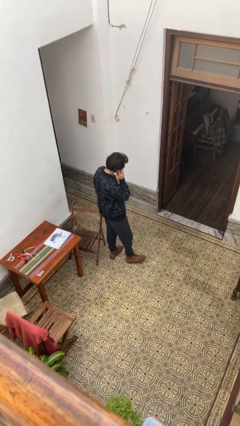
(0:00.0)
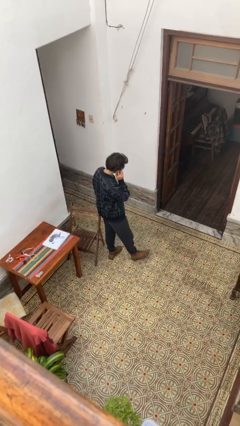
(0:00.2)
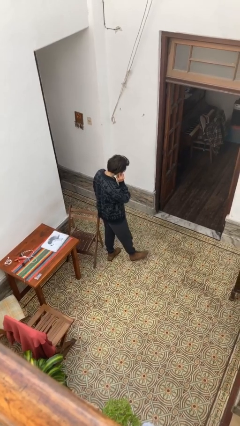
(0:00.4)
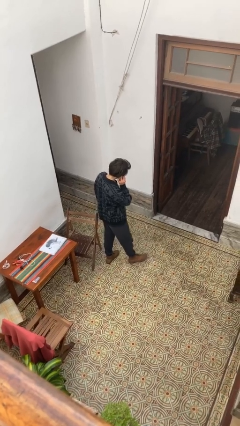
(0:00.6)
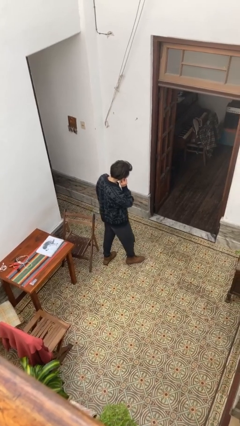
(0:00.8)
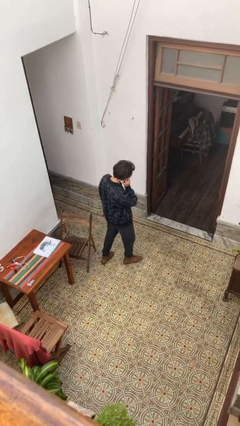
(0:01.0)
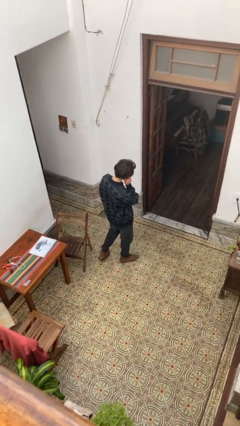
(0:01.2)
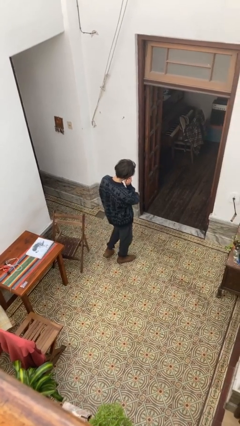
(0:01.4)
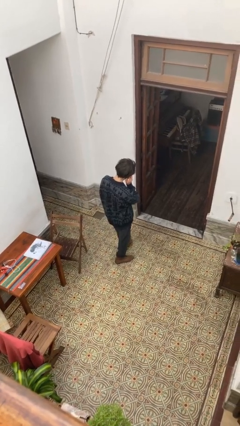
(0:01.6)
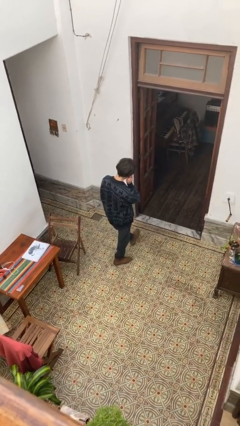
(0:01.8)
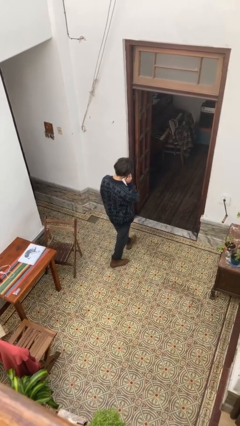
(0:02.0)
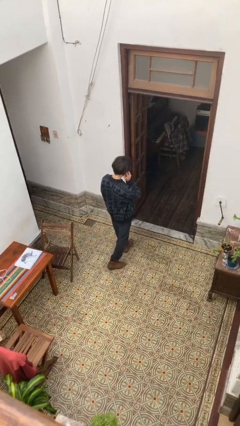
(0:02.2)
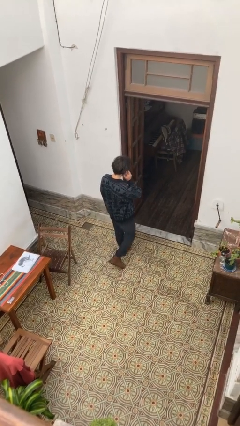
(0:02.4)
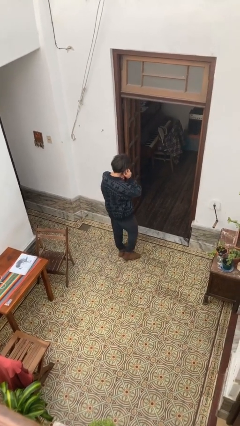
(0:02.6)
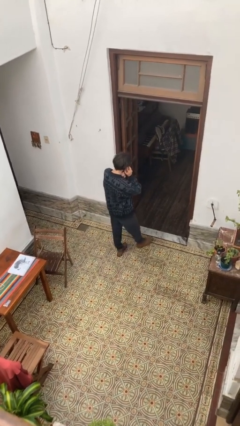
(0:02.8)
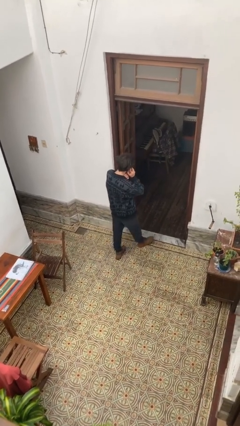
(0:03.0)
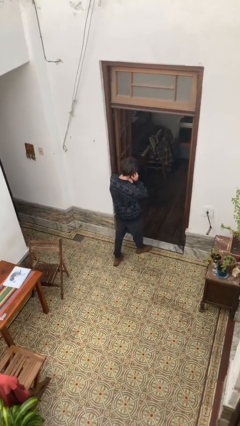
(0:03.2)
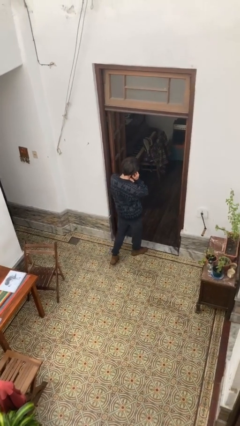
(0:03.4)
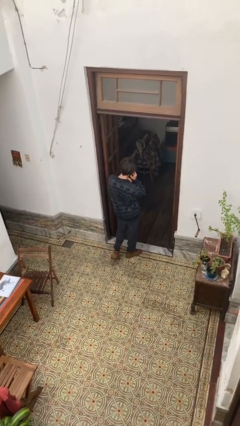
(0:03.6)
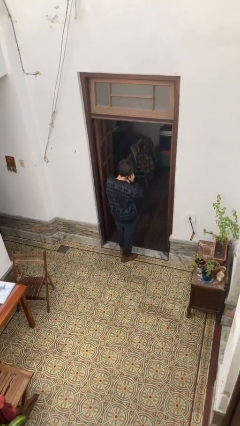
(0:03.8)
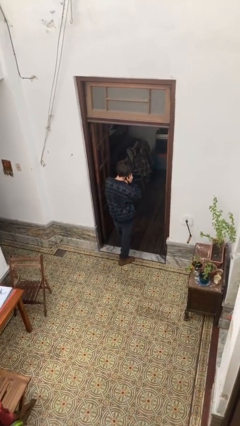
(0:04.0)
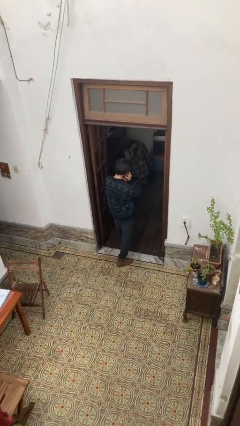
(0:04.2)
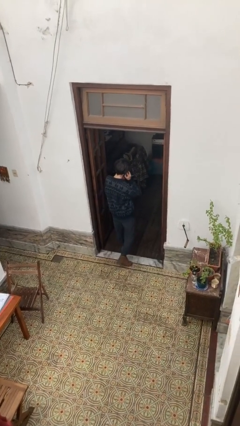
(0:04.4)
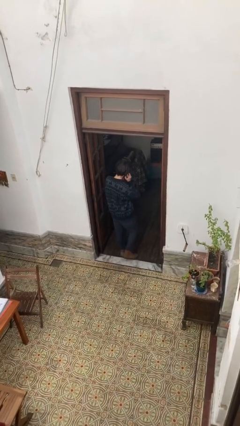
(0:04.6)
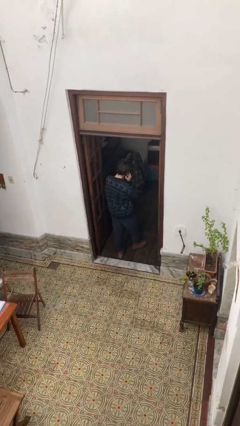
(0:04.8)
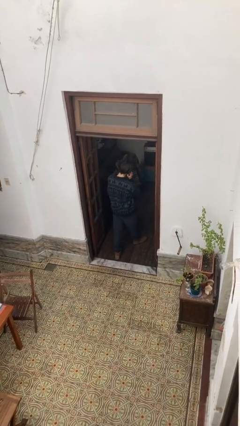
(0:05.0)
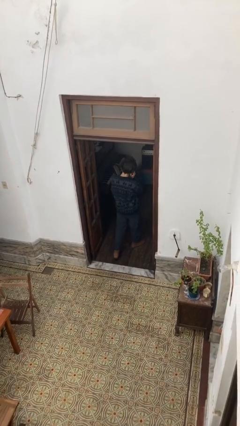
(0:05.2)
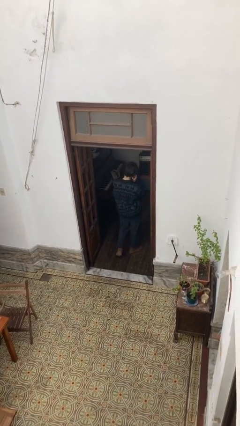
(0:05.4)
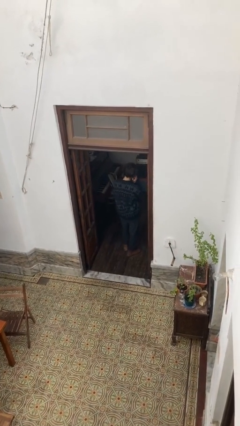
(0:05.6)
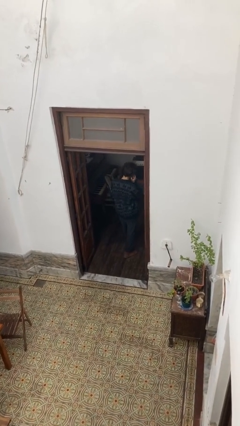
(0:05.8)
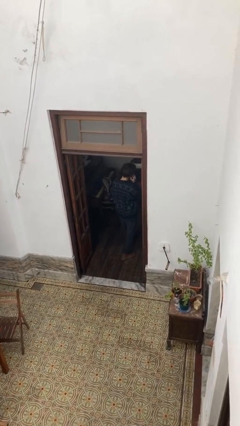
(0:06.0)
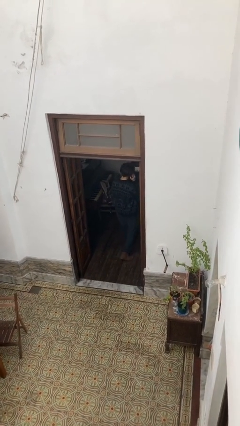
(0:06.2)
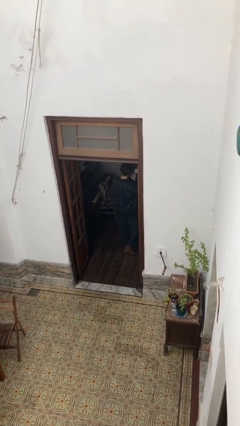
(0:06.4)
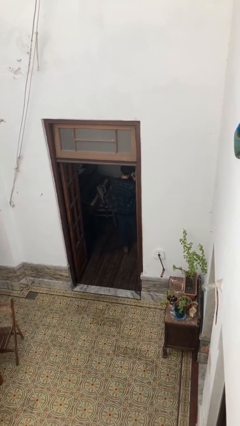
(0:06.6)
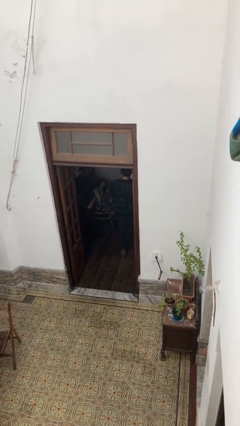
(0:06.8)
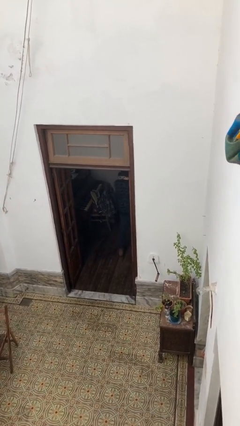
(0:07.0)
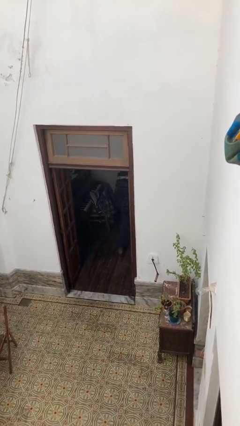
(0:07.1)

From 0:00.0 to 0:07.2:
person exits scene through structure

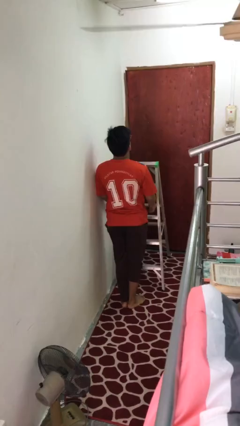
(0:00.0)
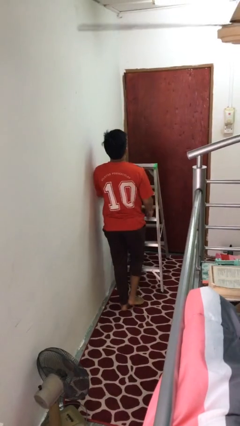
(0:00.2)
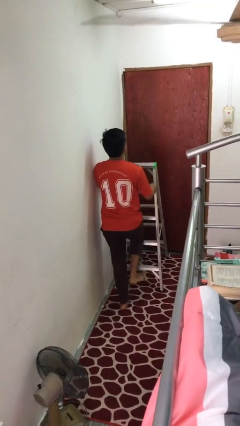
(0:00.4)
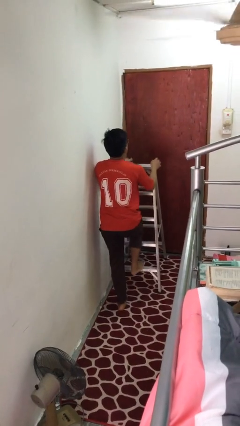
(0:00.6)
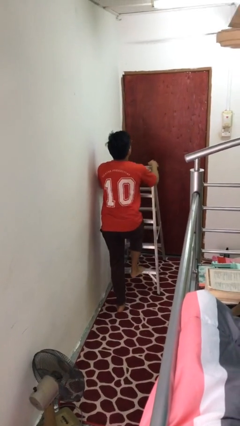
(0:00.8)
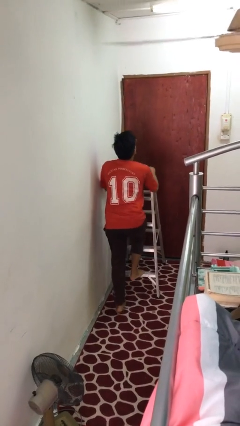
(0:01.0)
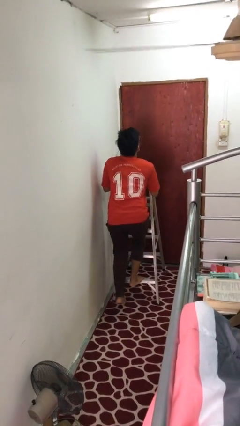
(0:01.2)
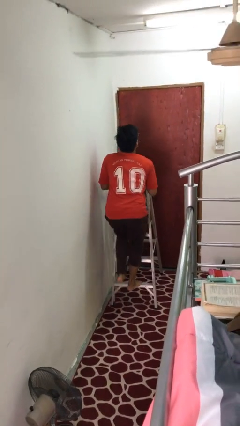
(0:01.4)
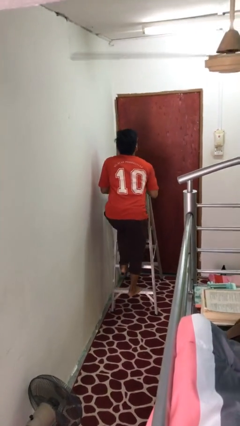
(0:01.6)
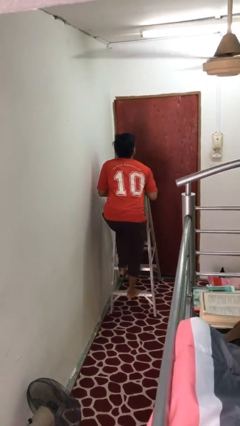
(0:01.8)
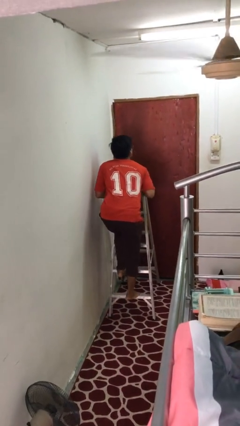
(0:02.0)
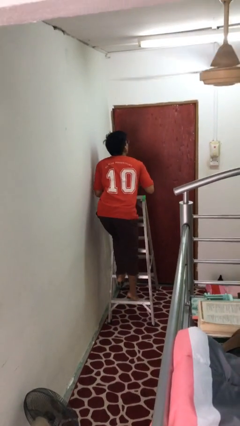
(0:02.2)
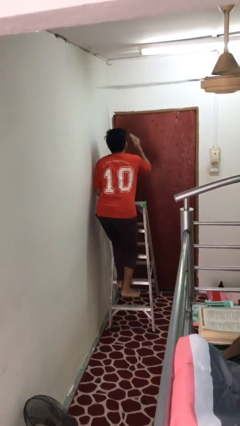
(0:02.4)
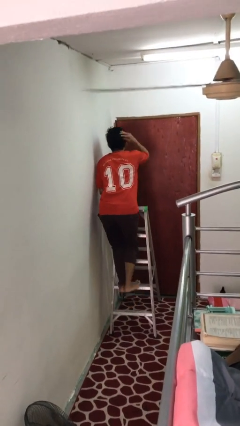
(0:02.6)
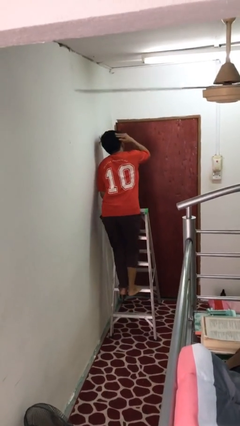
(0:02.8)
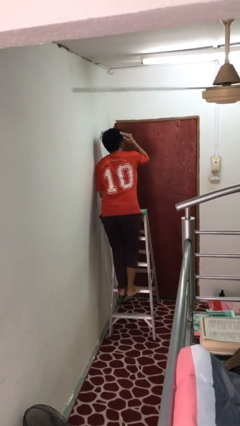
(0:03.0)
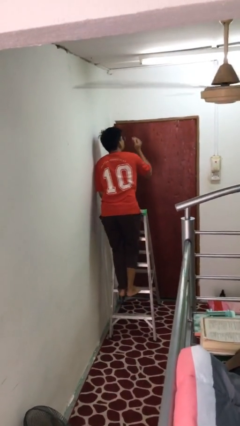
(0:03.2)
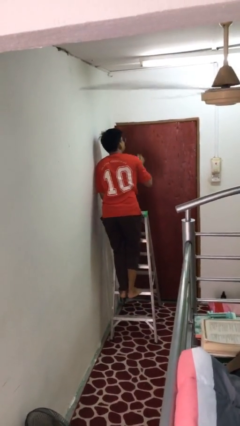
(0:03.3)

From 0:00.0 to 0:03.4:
person climbs up ladder

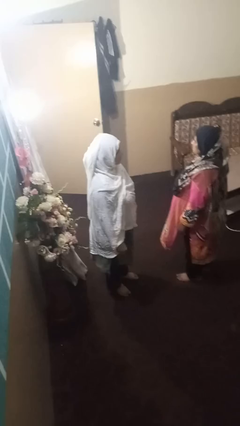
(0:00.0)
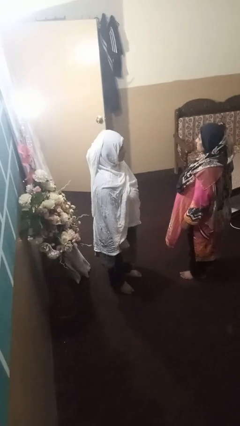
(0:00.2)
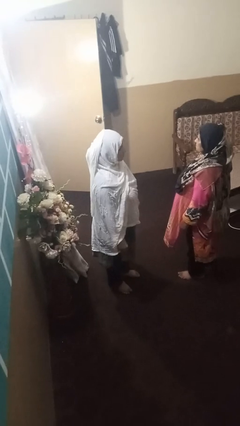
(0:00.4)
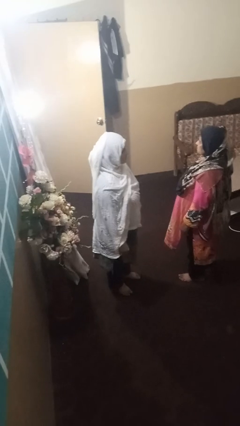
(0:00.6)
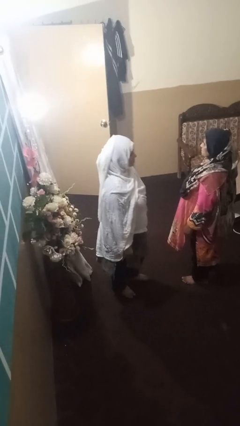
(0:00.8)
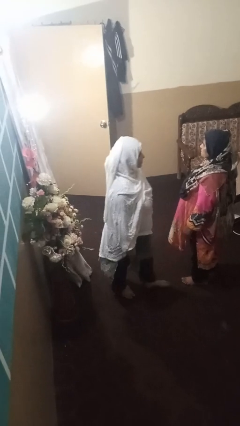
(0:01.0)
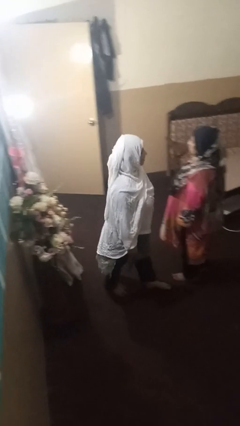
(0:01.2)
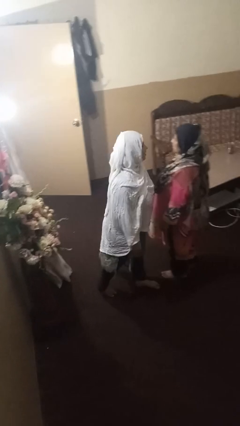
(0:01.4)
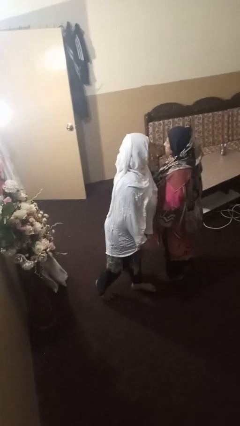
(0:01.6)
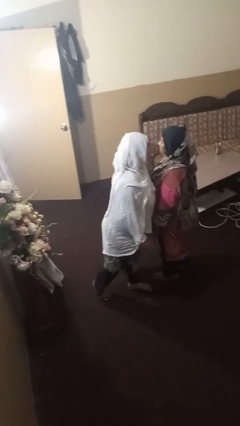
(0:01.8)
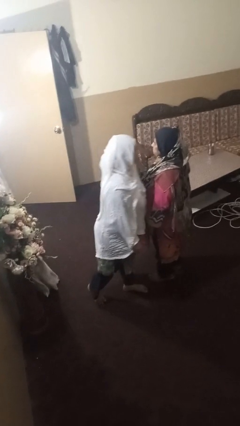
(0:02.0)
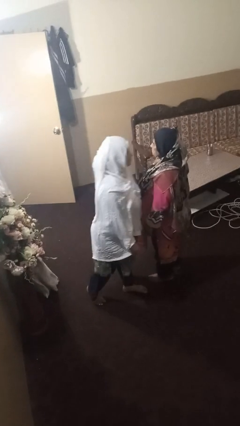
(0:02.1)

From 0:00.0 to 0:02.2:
person laughs with person

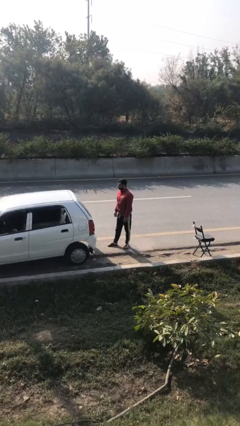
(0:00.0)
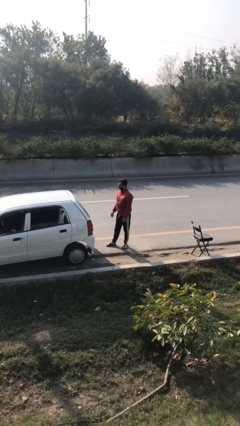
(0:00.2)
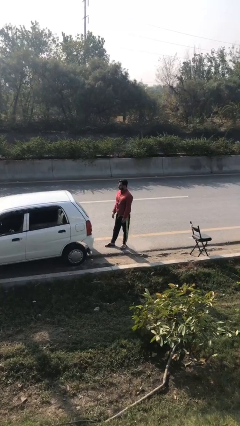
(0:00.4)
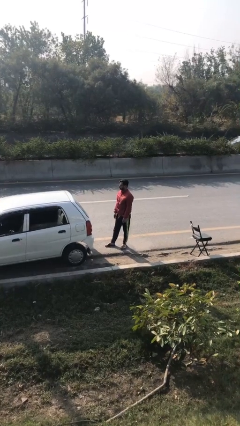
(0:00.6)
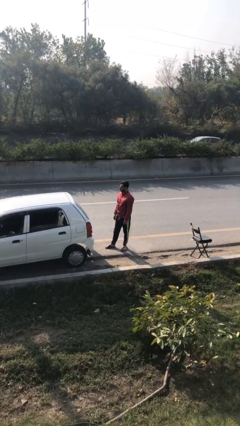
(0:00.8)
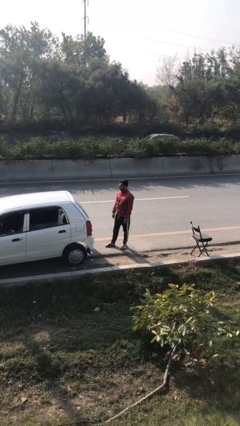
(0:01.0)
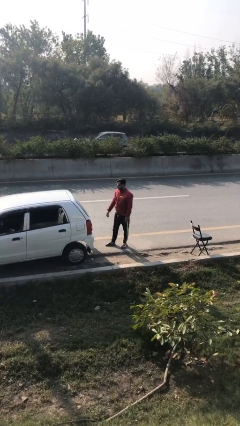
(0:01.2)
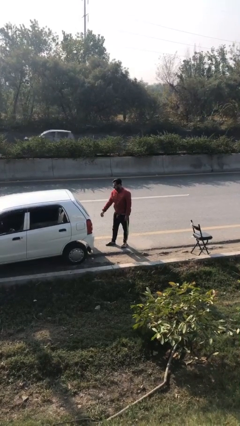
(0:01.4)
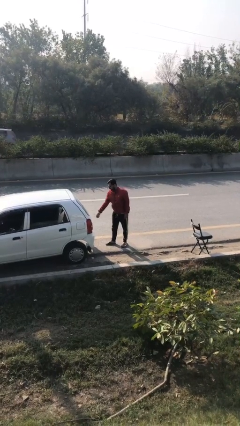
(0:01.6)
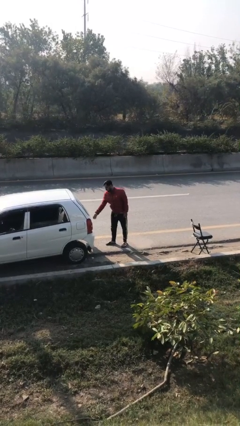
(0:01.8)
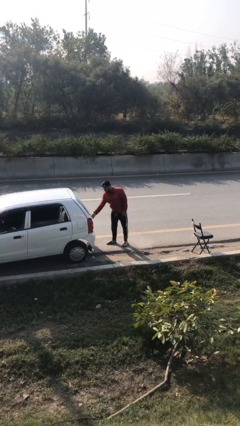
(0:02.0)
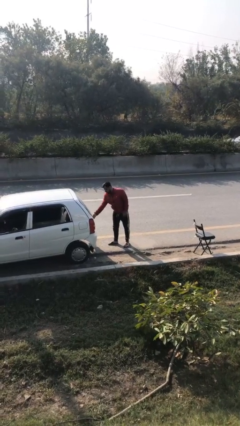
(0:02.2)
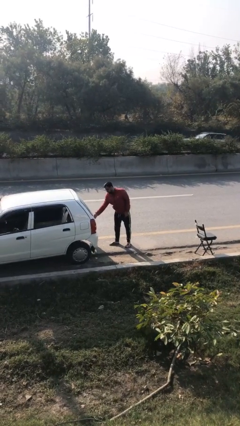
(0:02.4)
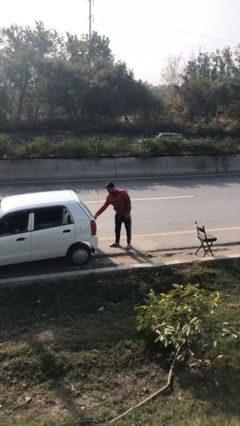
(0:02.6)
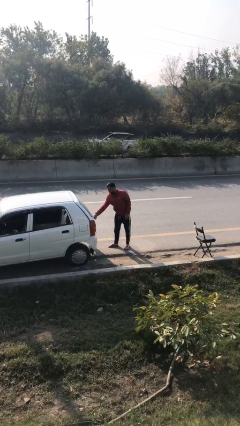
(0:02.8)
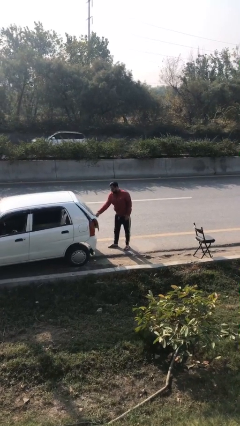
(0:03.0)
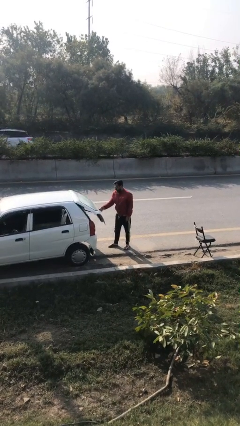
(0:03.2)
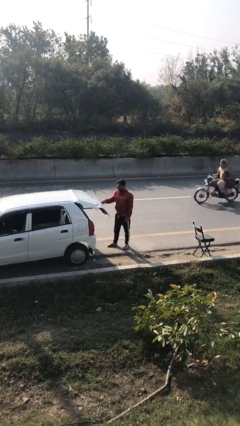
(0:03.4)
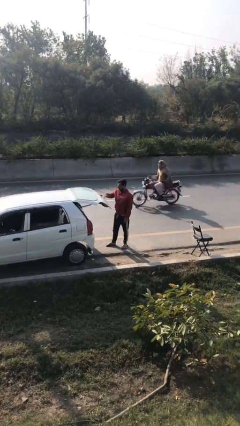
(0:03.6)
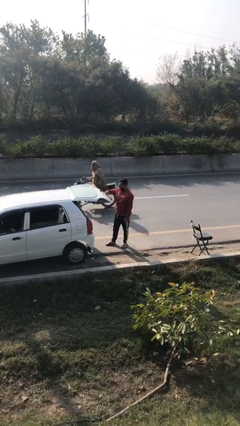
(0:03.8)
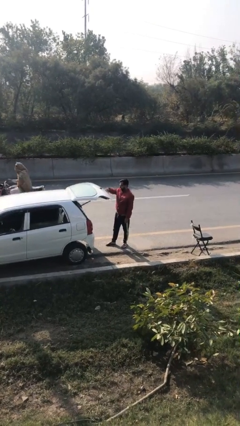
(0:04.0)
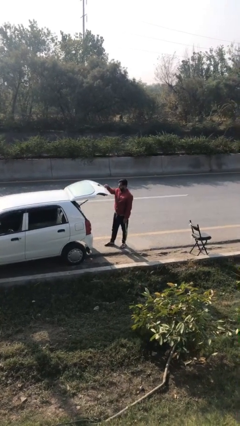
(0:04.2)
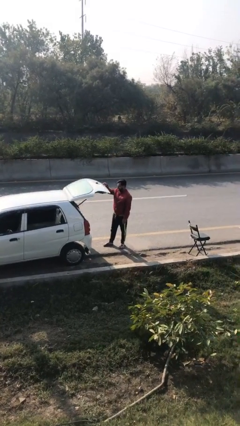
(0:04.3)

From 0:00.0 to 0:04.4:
person opens car trunk

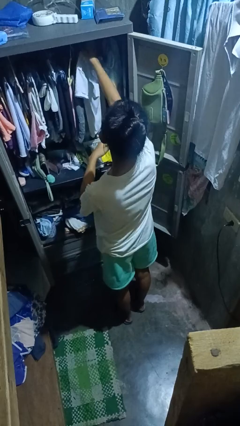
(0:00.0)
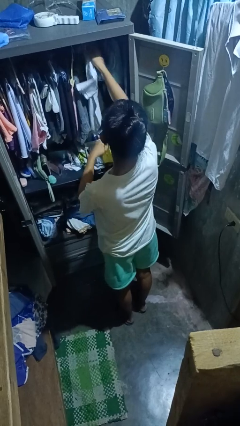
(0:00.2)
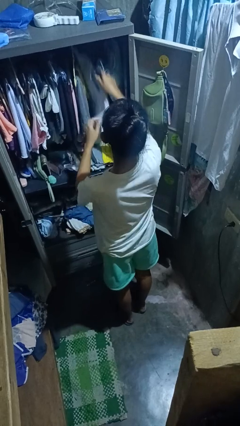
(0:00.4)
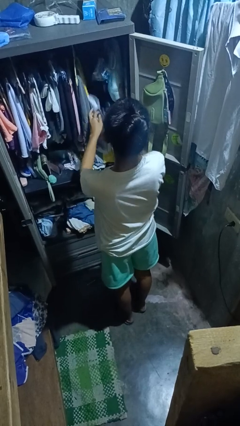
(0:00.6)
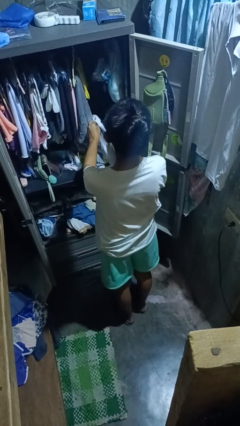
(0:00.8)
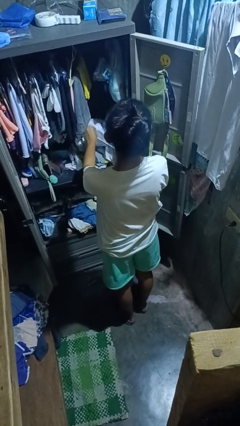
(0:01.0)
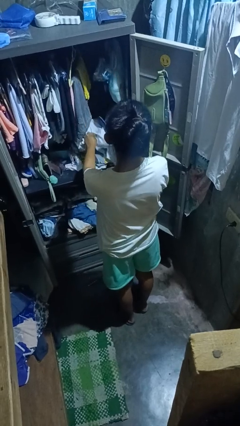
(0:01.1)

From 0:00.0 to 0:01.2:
person takes clothes from closet
